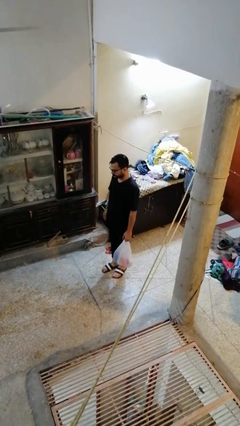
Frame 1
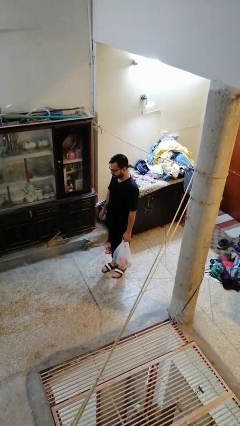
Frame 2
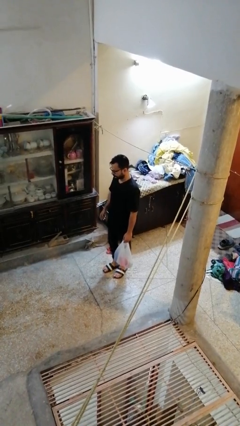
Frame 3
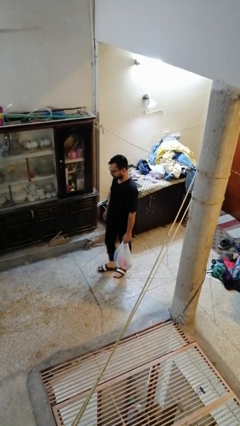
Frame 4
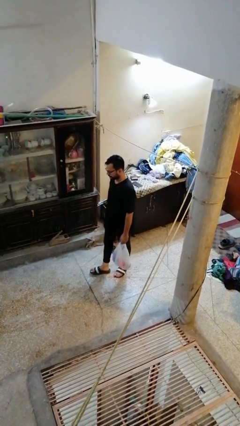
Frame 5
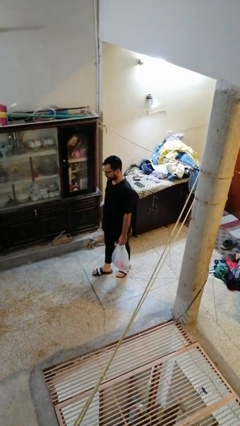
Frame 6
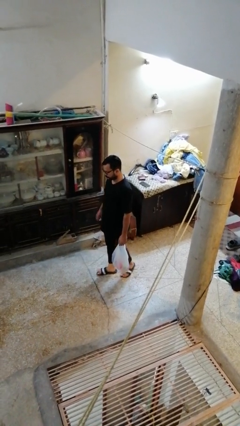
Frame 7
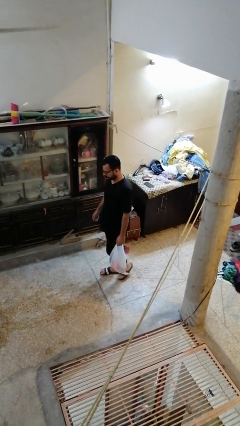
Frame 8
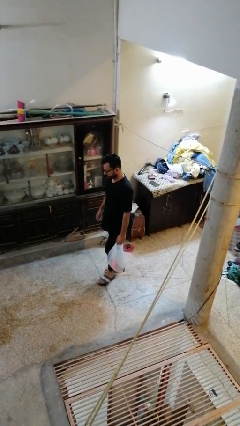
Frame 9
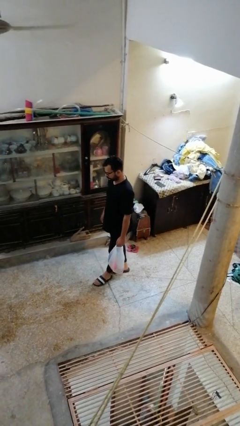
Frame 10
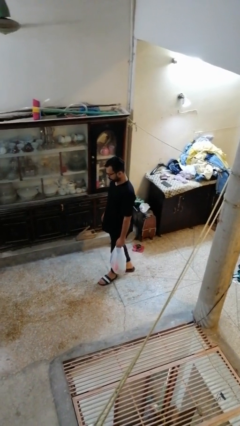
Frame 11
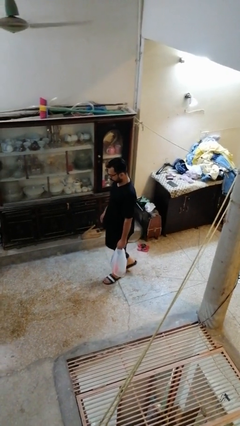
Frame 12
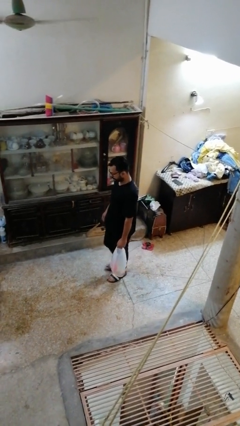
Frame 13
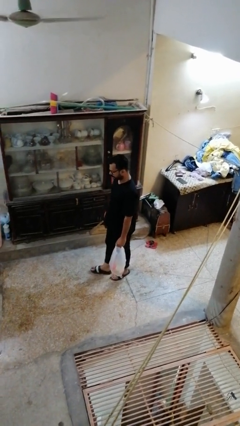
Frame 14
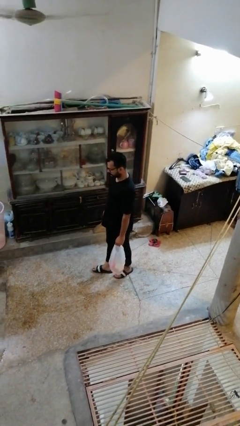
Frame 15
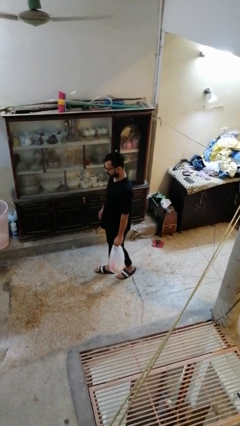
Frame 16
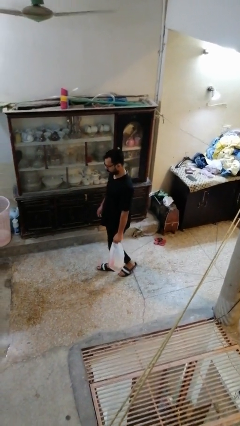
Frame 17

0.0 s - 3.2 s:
person carries groceries

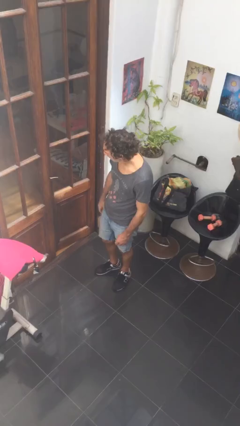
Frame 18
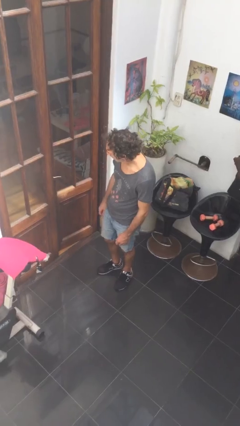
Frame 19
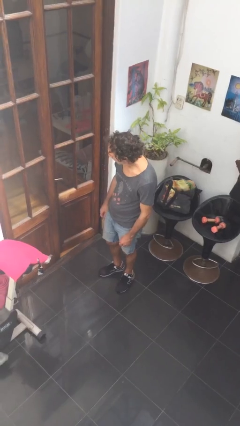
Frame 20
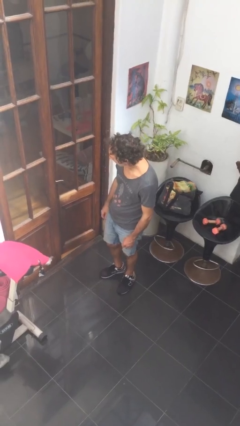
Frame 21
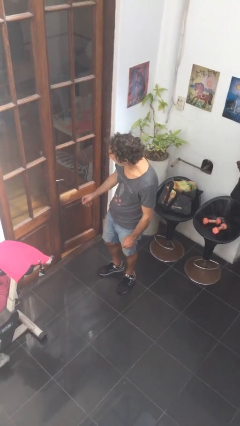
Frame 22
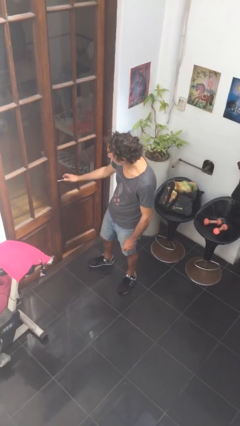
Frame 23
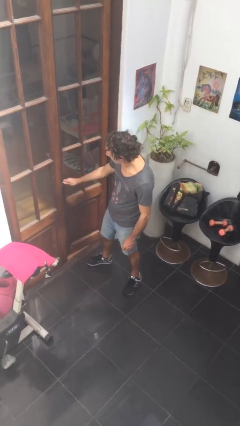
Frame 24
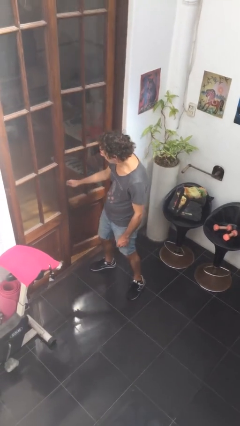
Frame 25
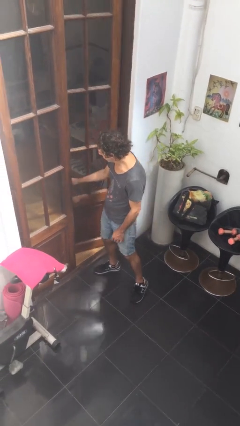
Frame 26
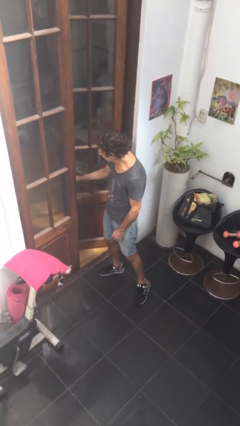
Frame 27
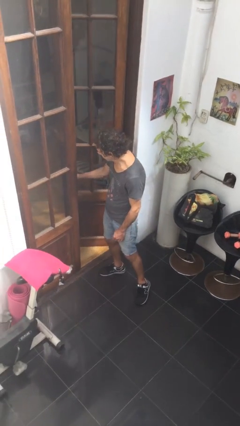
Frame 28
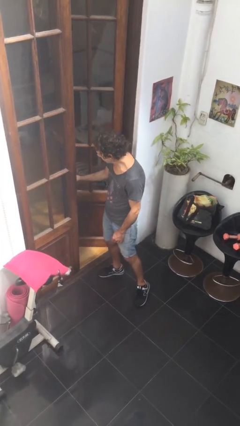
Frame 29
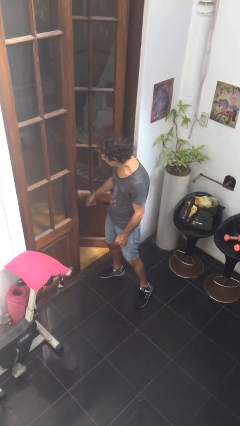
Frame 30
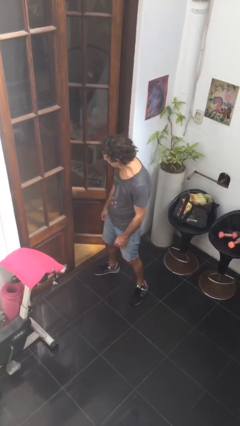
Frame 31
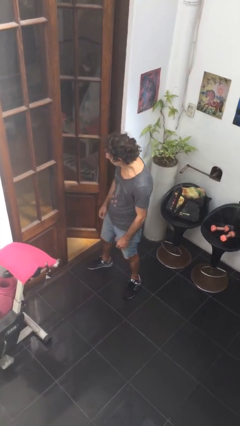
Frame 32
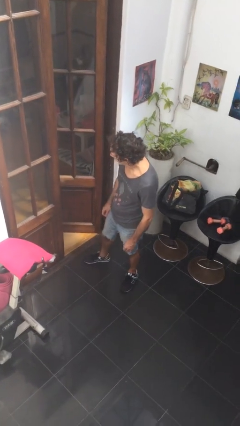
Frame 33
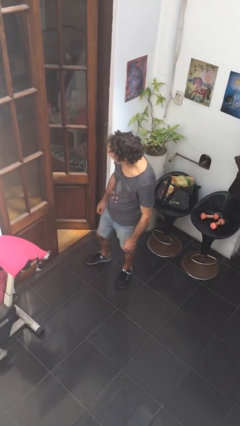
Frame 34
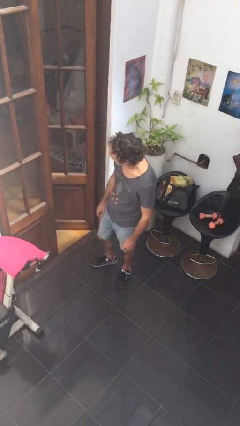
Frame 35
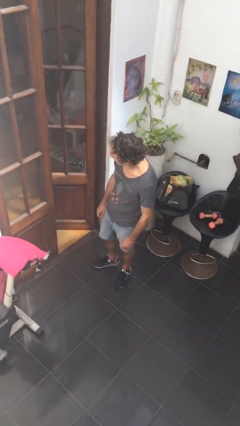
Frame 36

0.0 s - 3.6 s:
person opens facility door

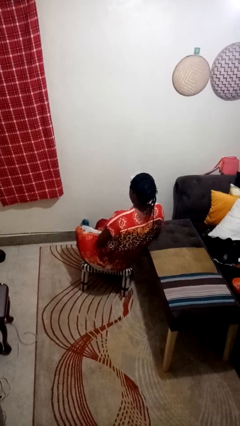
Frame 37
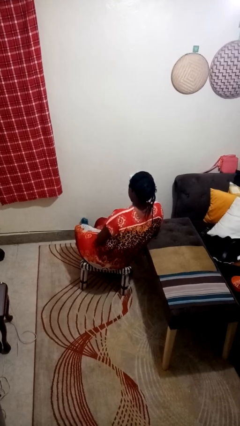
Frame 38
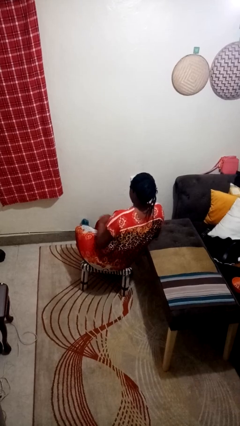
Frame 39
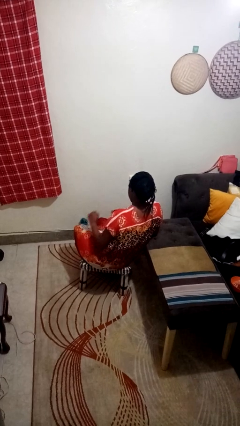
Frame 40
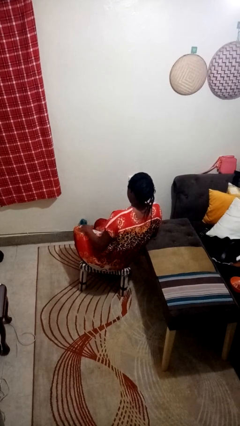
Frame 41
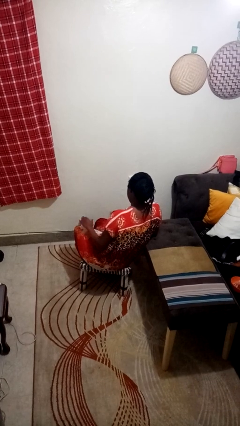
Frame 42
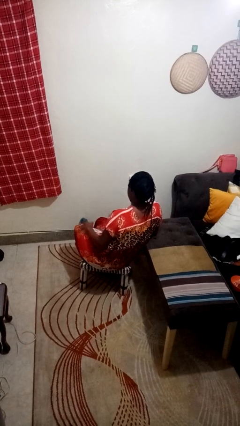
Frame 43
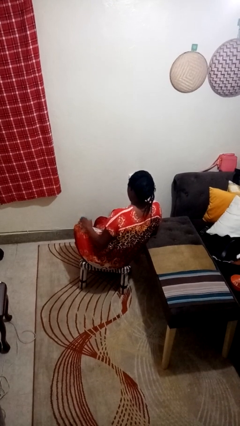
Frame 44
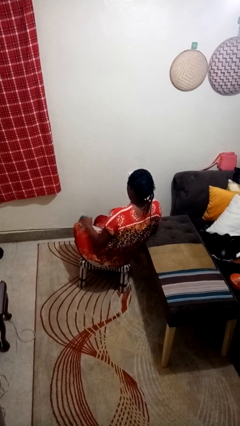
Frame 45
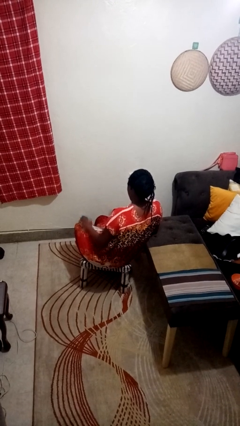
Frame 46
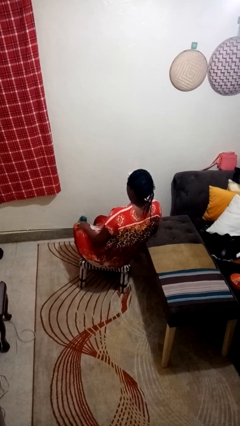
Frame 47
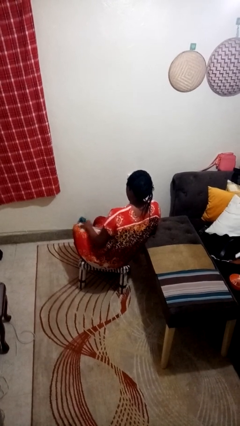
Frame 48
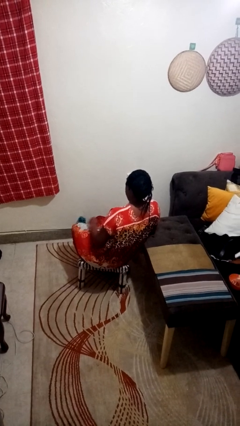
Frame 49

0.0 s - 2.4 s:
person slaps hands on thighs

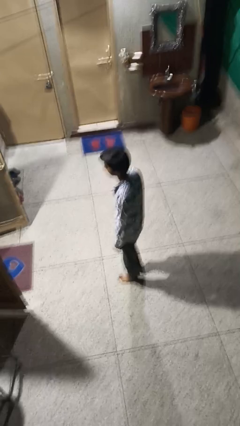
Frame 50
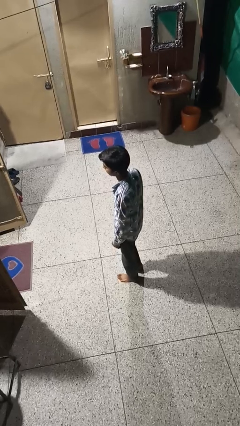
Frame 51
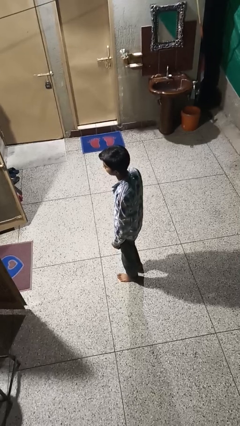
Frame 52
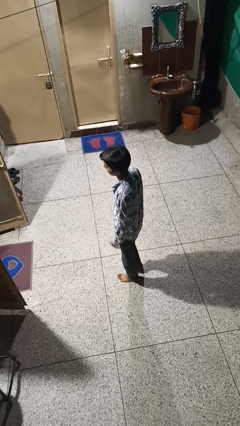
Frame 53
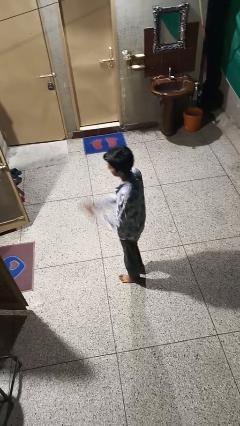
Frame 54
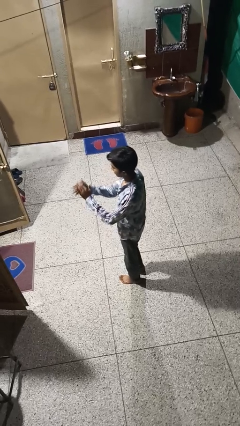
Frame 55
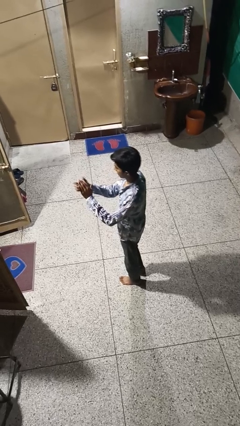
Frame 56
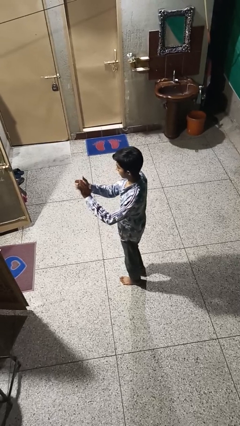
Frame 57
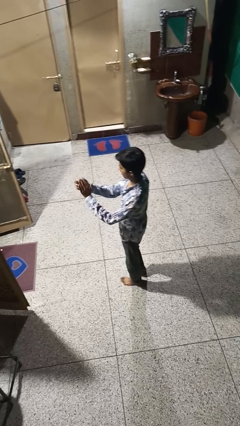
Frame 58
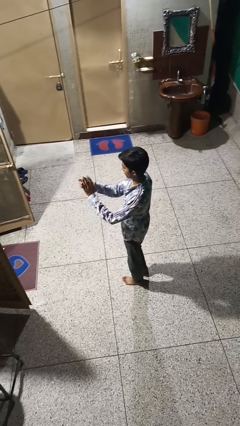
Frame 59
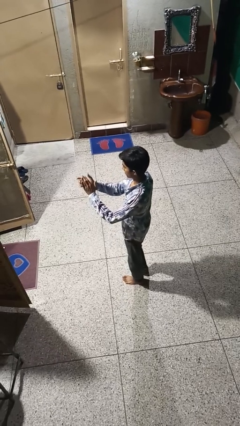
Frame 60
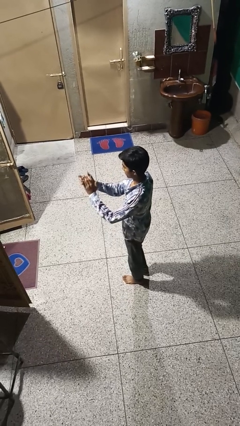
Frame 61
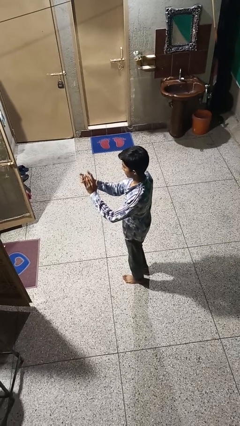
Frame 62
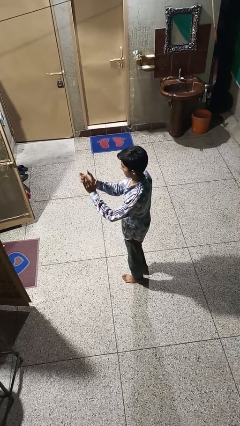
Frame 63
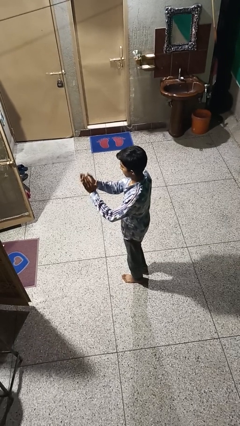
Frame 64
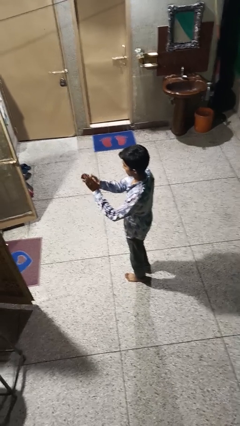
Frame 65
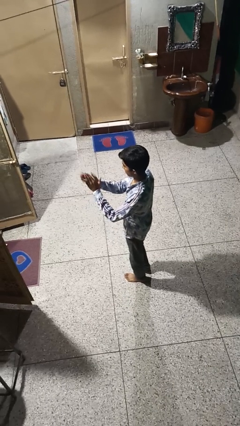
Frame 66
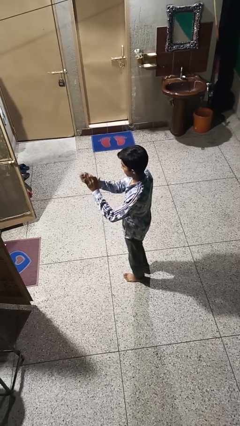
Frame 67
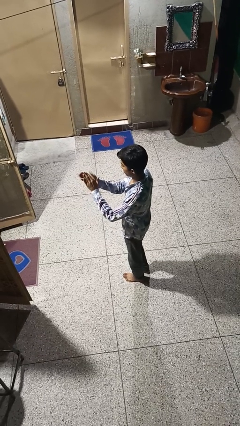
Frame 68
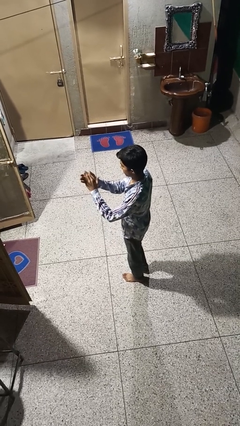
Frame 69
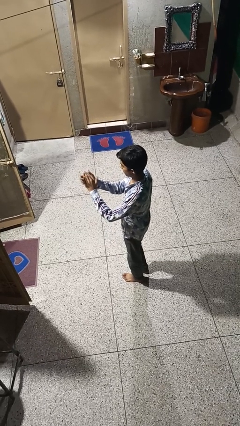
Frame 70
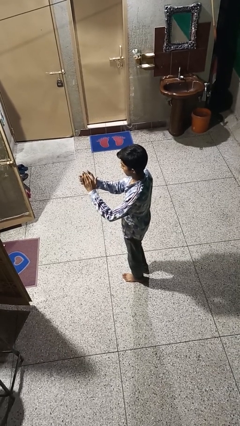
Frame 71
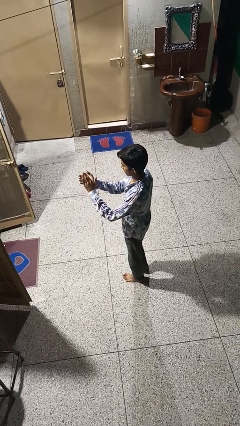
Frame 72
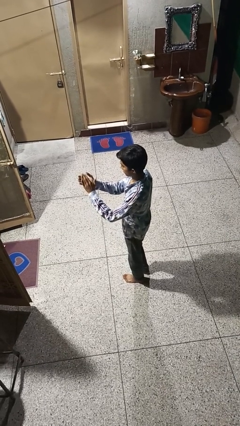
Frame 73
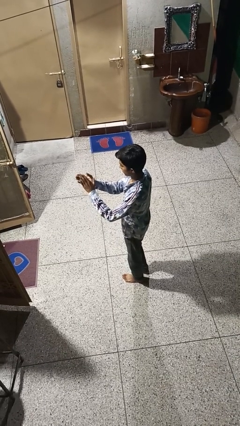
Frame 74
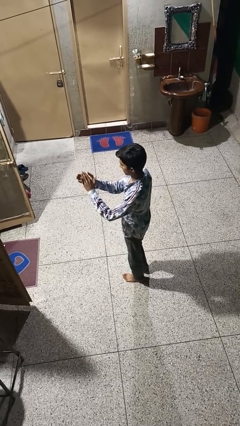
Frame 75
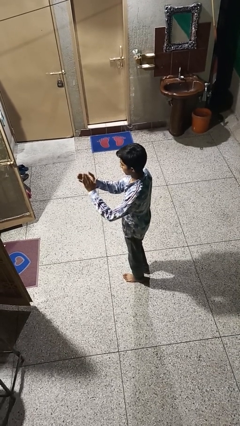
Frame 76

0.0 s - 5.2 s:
person claps hands

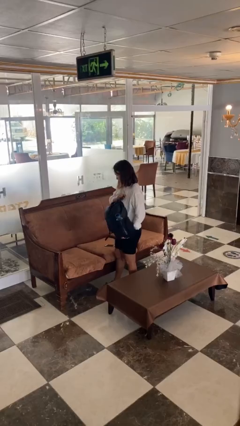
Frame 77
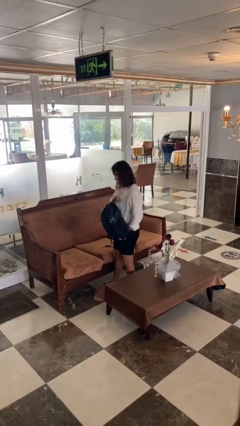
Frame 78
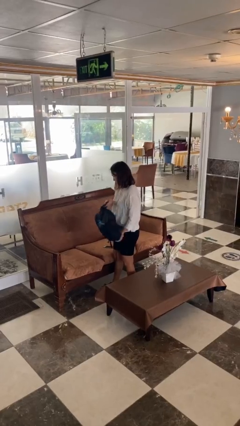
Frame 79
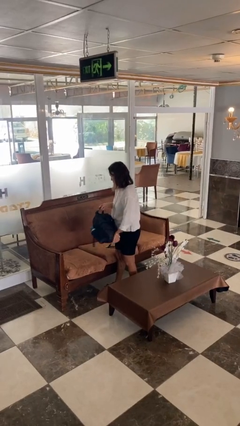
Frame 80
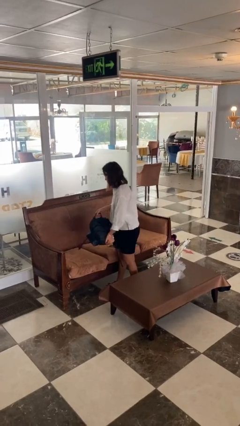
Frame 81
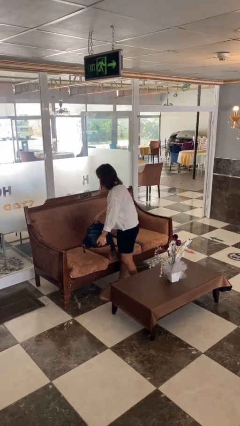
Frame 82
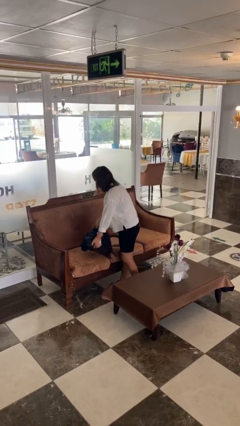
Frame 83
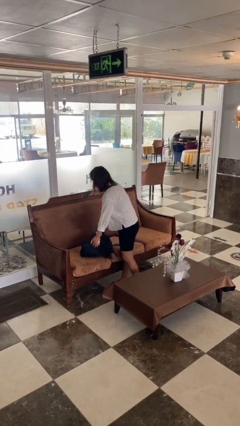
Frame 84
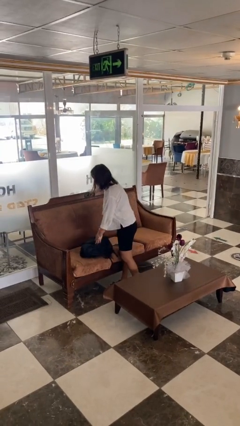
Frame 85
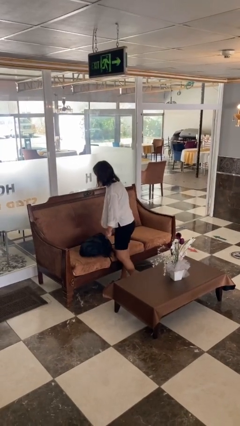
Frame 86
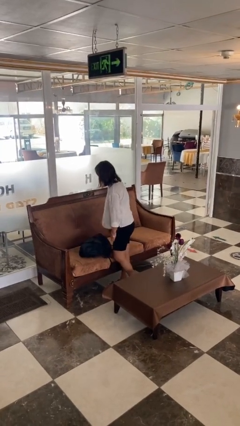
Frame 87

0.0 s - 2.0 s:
person puts down object on couch

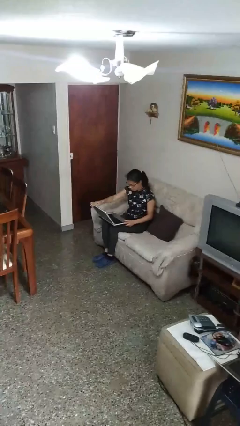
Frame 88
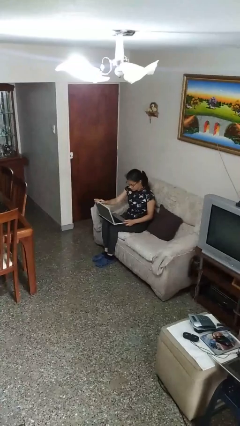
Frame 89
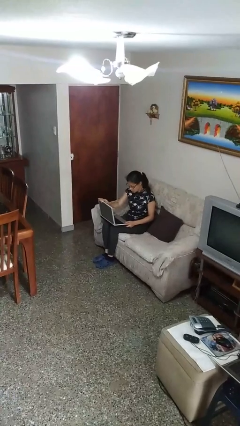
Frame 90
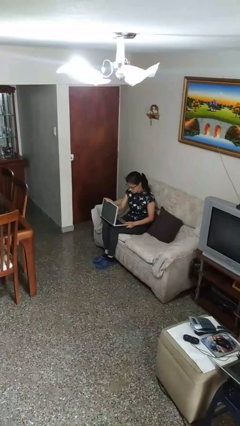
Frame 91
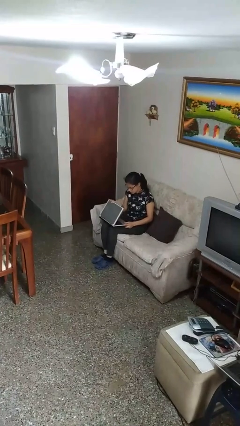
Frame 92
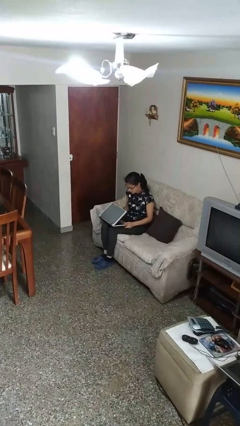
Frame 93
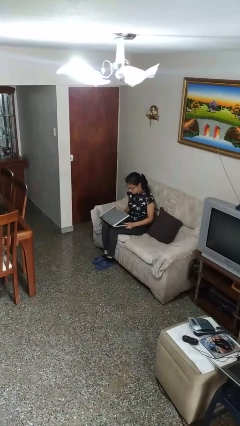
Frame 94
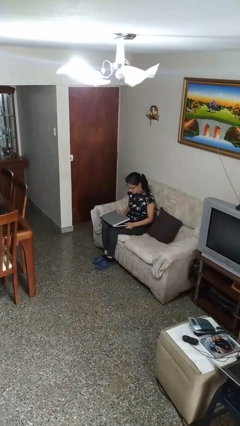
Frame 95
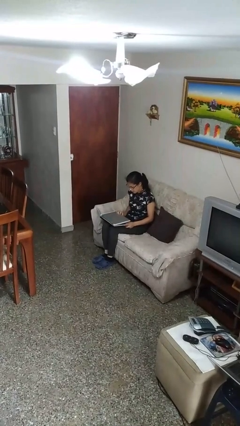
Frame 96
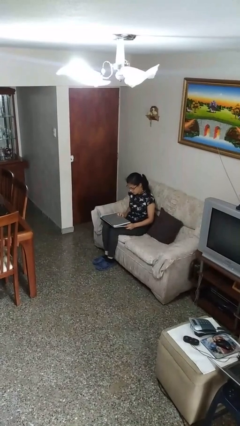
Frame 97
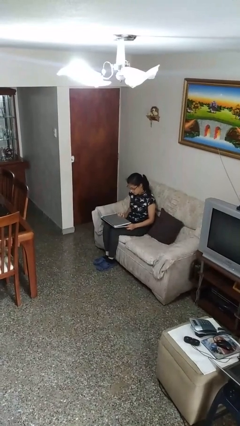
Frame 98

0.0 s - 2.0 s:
person closes laptop
